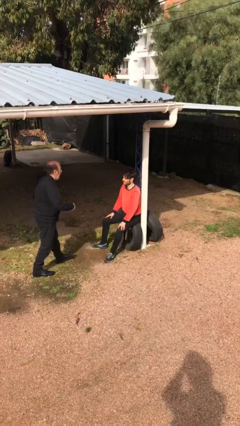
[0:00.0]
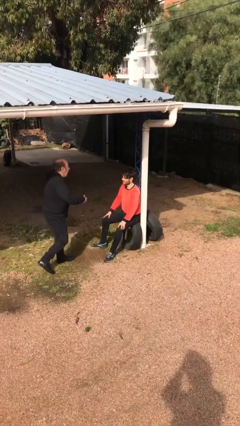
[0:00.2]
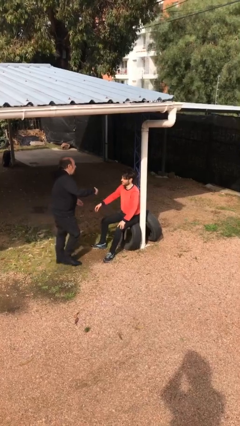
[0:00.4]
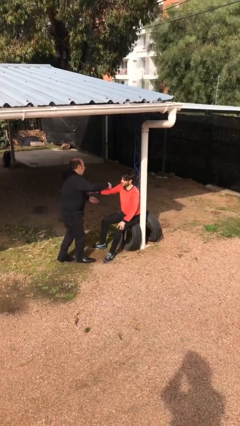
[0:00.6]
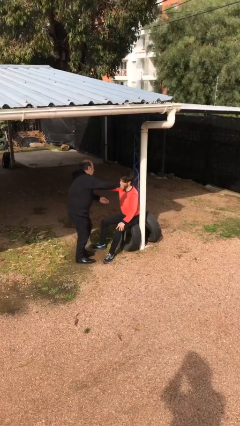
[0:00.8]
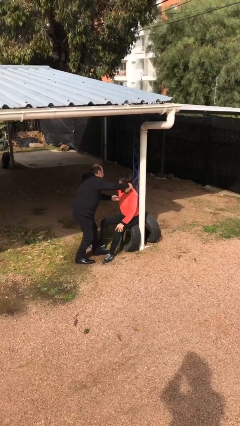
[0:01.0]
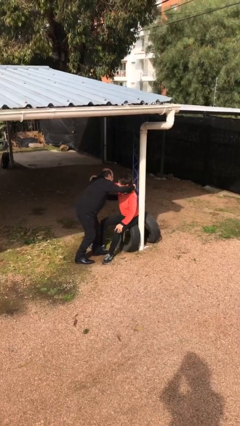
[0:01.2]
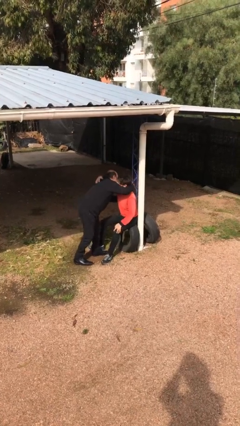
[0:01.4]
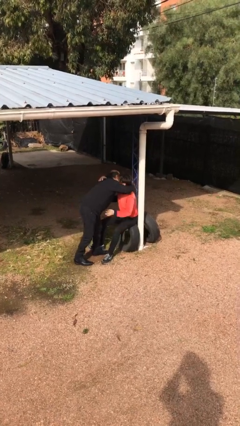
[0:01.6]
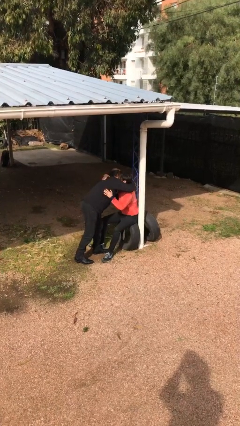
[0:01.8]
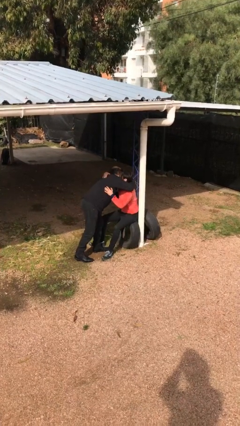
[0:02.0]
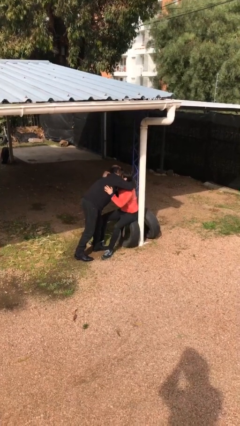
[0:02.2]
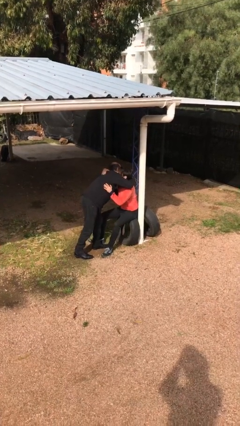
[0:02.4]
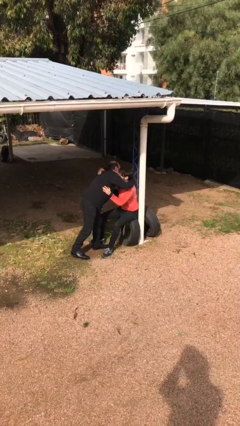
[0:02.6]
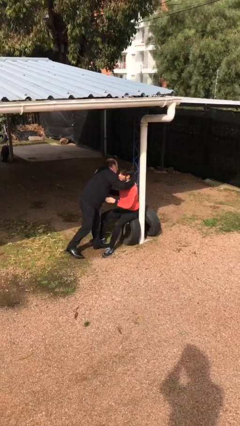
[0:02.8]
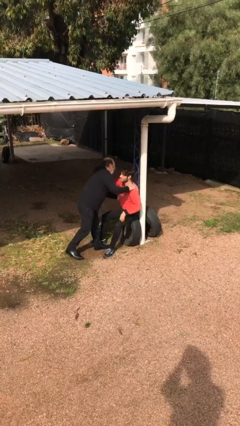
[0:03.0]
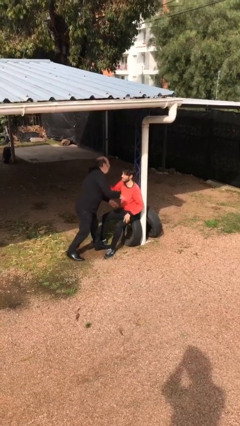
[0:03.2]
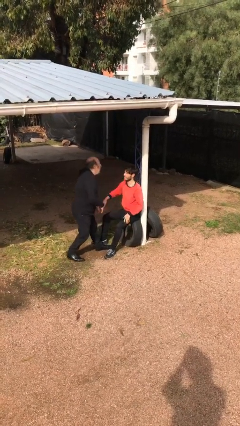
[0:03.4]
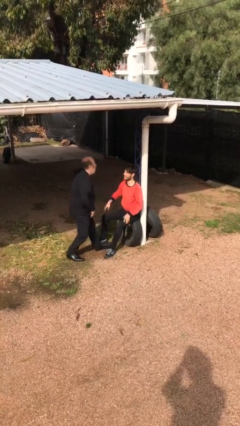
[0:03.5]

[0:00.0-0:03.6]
person embraces person

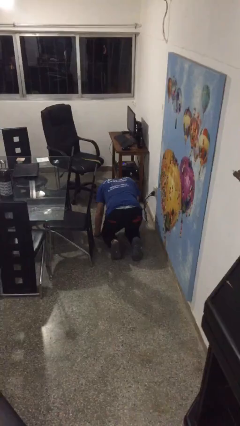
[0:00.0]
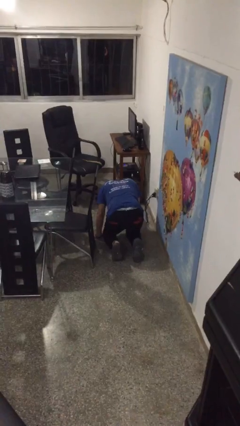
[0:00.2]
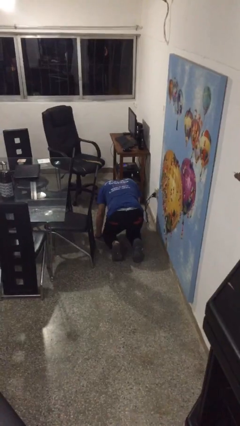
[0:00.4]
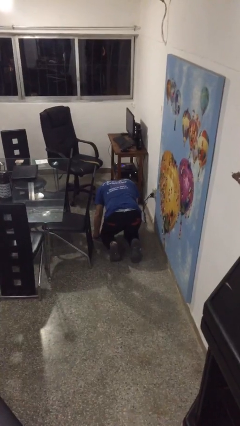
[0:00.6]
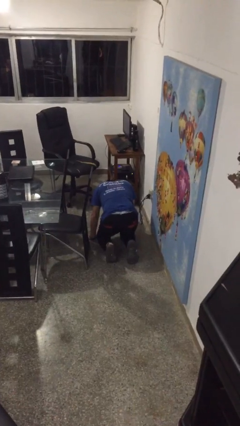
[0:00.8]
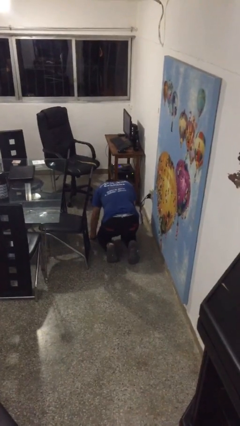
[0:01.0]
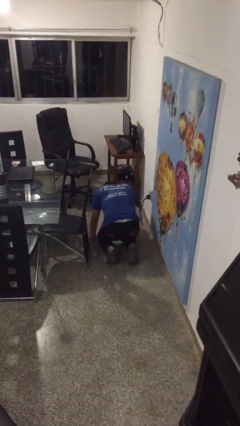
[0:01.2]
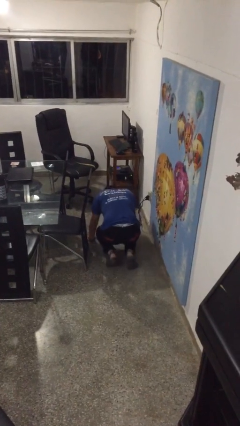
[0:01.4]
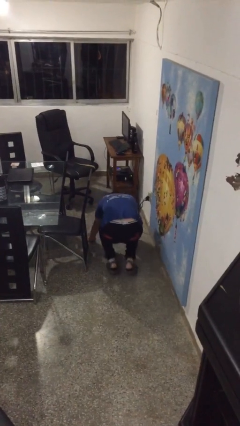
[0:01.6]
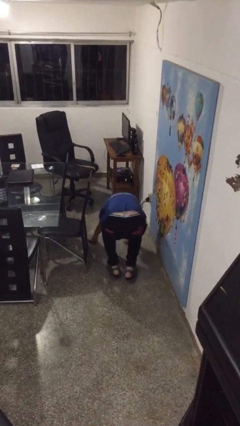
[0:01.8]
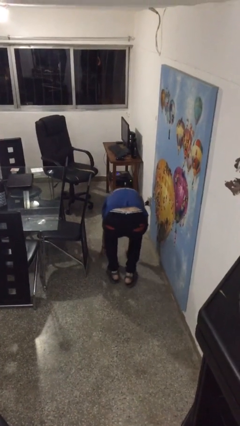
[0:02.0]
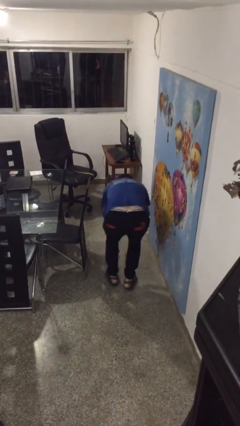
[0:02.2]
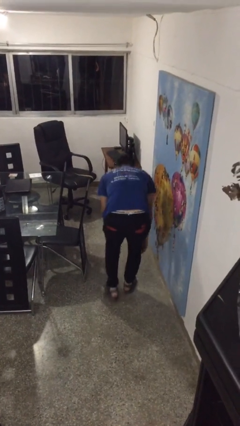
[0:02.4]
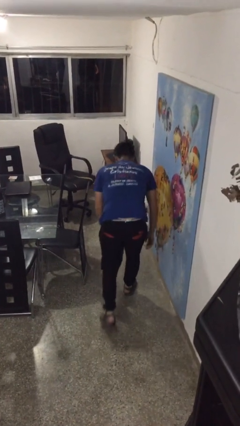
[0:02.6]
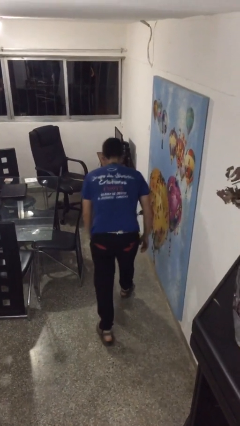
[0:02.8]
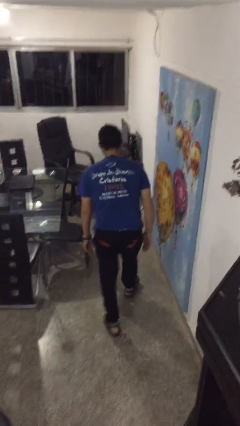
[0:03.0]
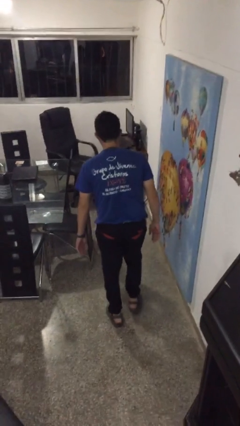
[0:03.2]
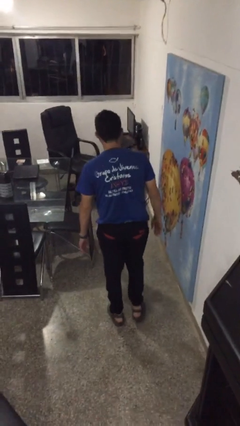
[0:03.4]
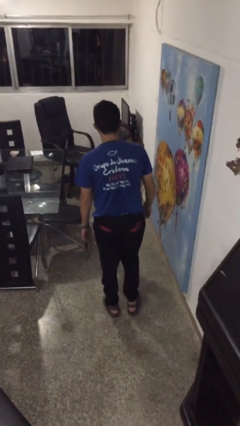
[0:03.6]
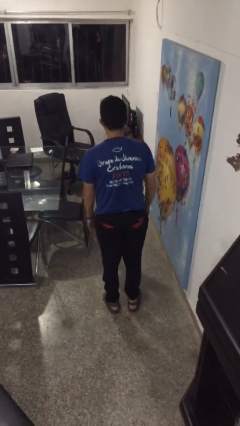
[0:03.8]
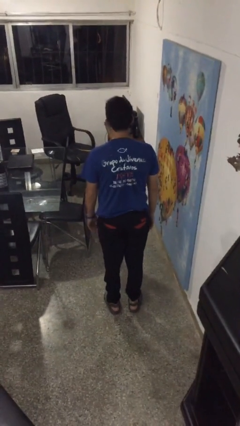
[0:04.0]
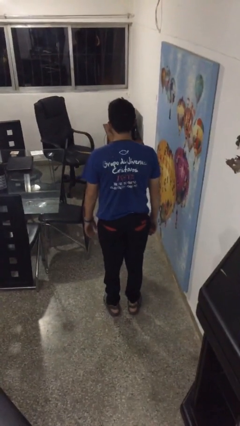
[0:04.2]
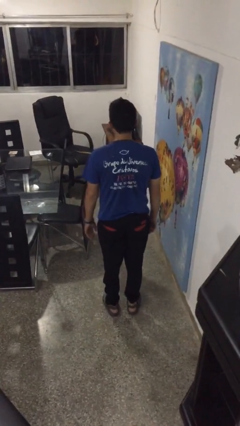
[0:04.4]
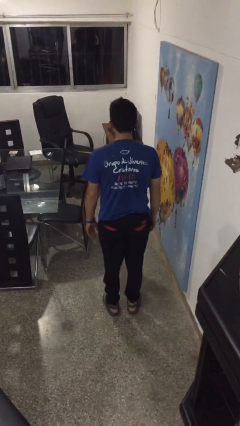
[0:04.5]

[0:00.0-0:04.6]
person stands up from floor

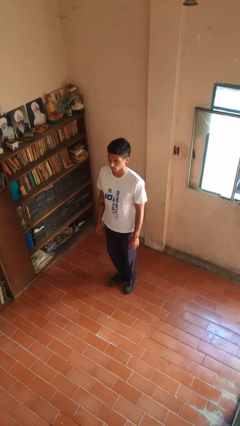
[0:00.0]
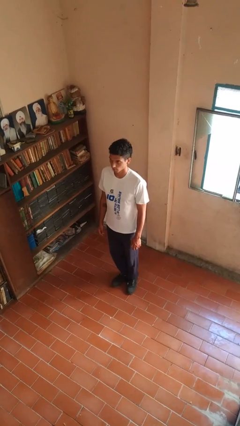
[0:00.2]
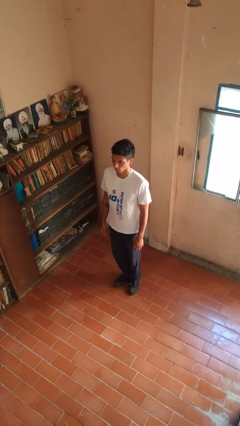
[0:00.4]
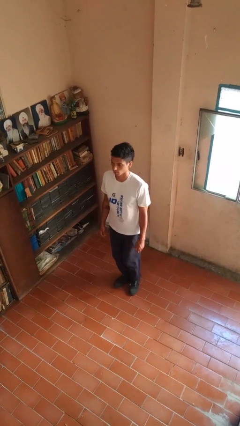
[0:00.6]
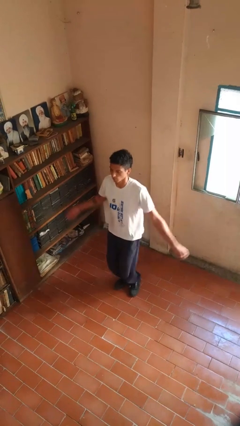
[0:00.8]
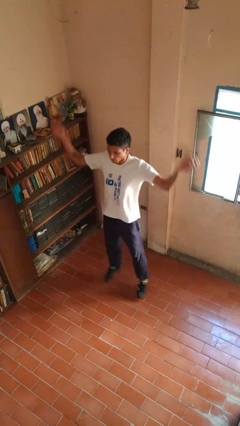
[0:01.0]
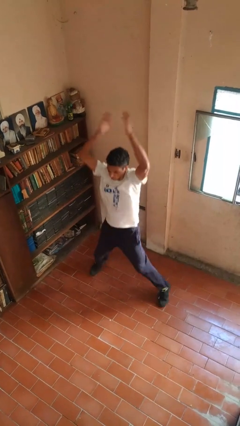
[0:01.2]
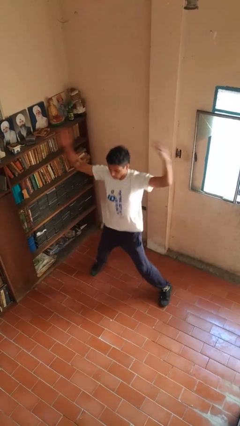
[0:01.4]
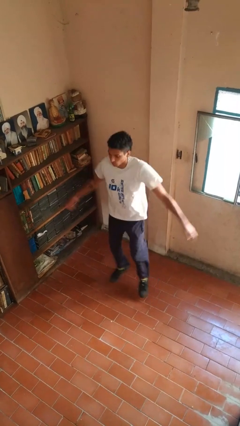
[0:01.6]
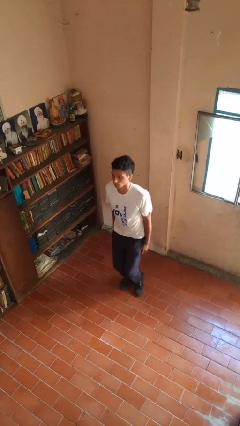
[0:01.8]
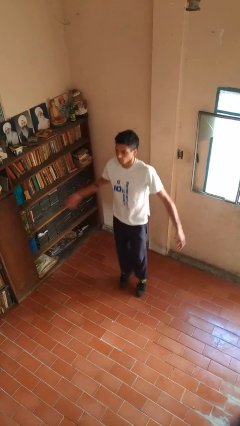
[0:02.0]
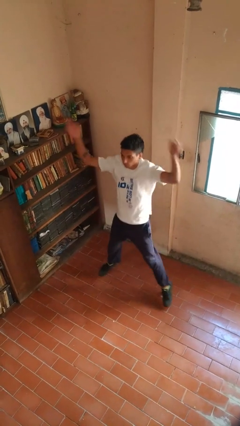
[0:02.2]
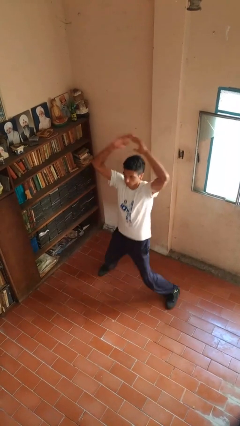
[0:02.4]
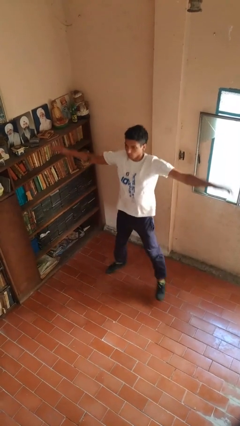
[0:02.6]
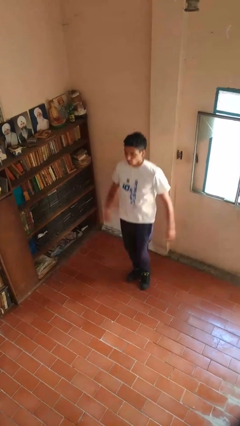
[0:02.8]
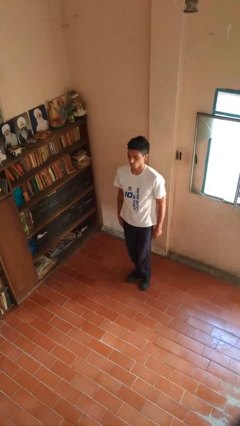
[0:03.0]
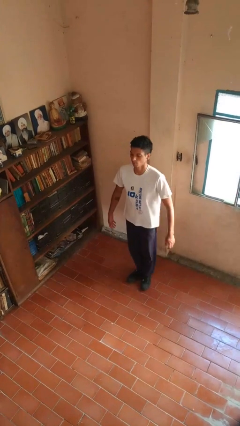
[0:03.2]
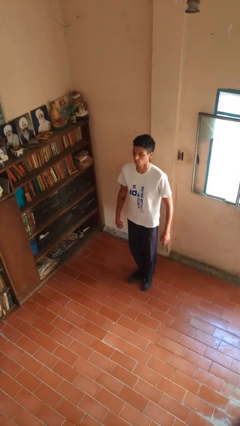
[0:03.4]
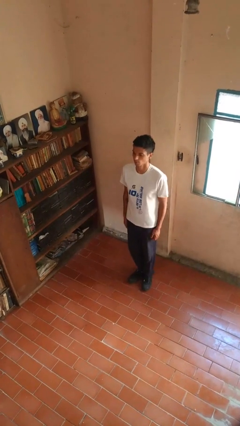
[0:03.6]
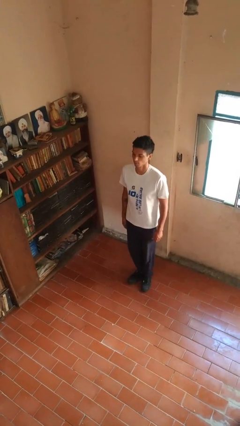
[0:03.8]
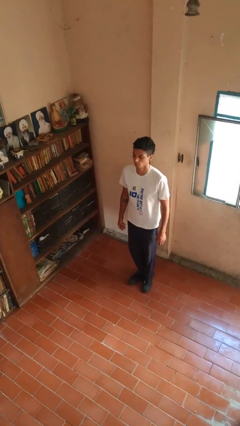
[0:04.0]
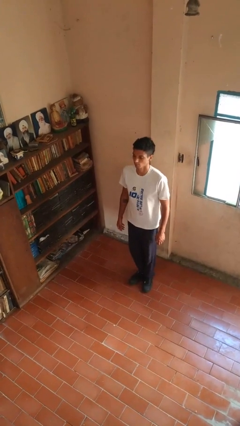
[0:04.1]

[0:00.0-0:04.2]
person exercises with jumping jacks

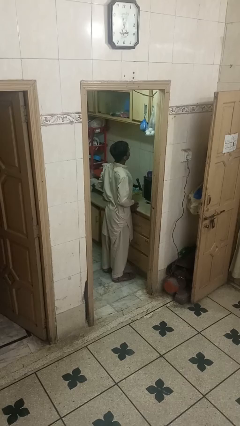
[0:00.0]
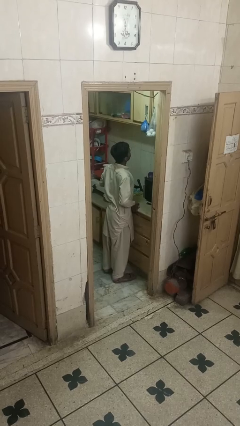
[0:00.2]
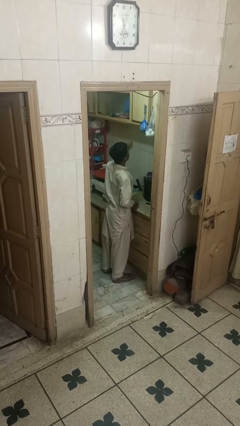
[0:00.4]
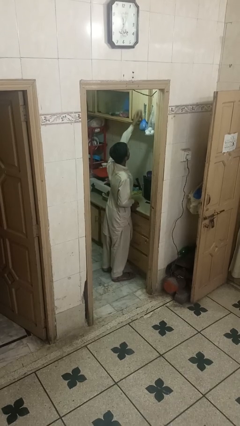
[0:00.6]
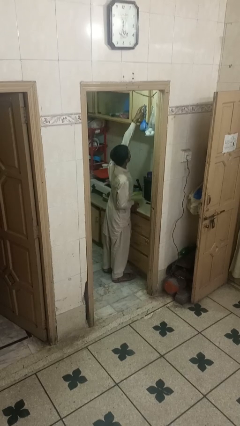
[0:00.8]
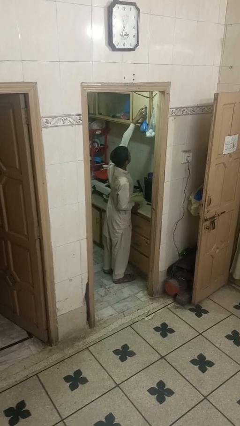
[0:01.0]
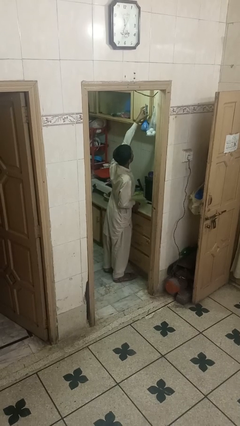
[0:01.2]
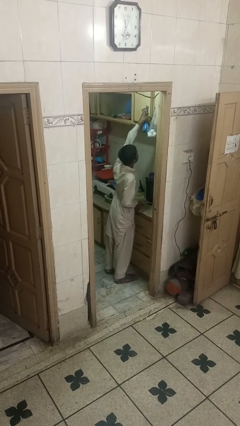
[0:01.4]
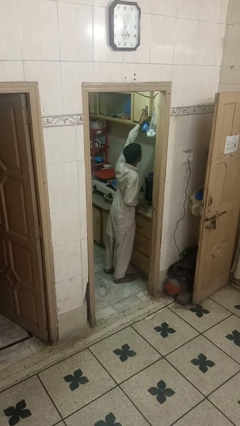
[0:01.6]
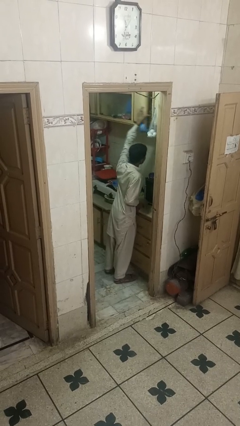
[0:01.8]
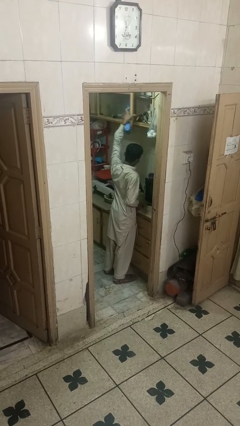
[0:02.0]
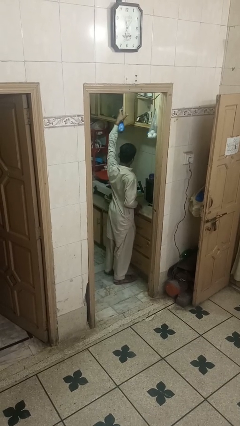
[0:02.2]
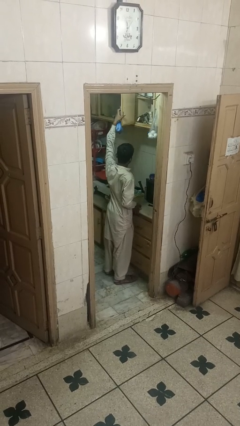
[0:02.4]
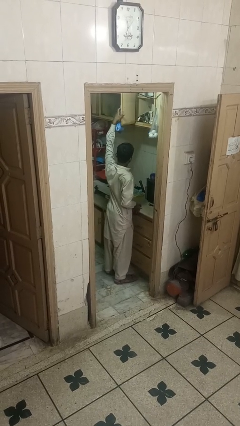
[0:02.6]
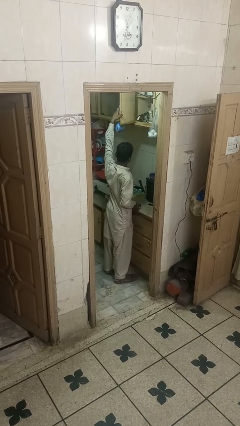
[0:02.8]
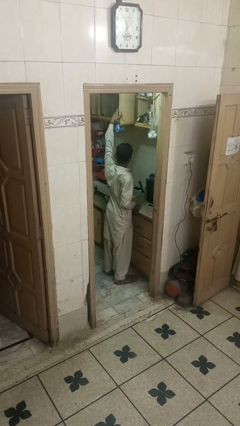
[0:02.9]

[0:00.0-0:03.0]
person opens cabinet

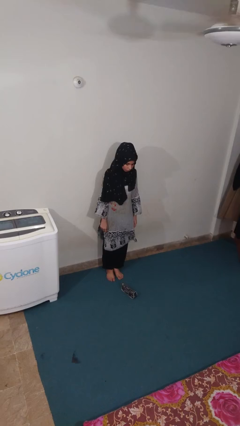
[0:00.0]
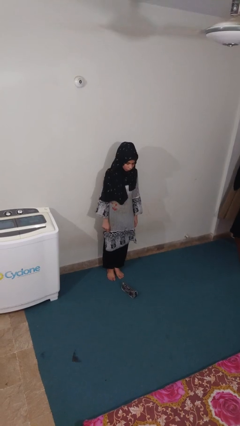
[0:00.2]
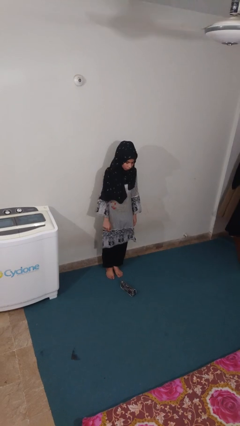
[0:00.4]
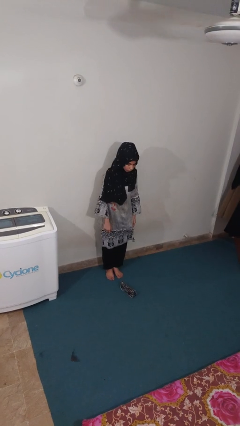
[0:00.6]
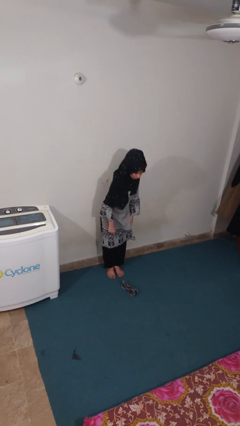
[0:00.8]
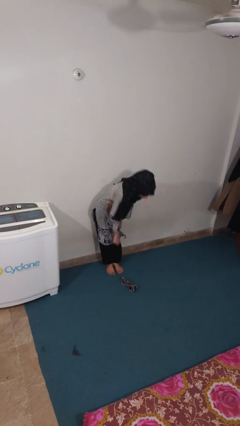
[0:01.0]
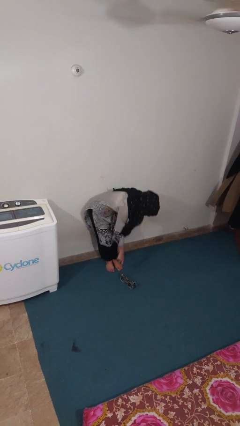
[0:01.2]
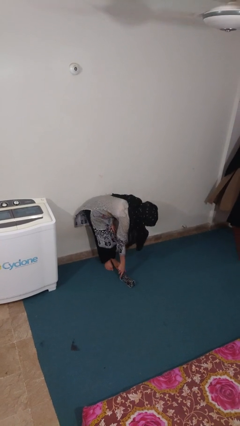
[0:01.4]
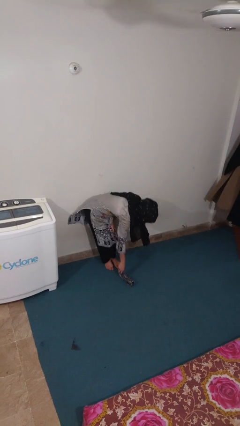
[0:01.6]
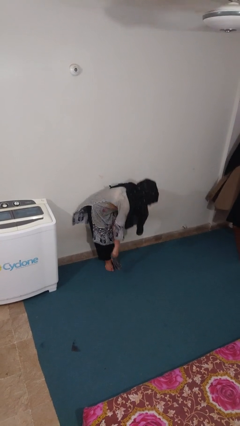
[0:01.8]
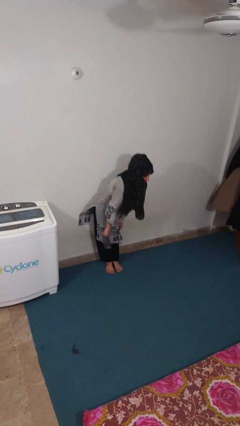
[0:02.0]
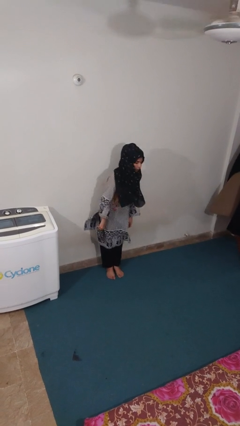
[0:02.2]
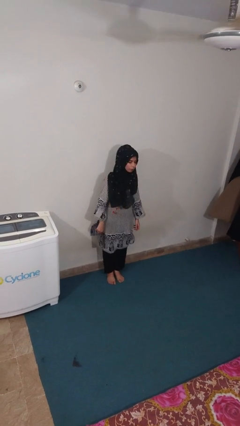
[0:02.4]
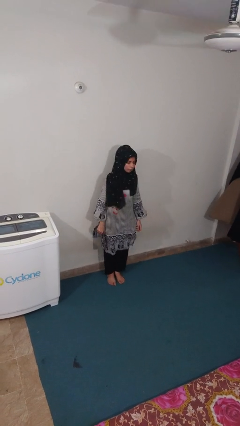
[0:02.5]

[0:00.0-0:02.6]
person picks up object from floor

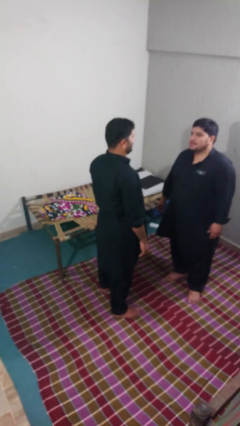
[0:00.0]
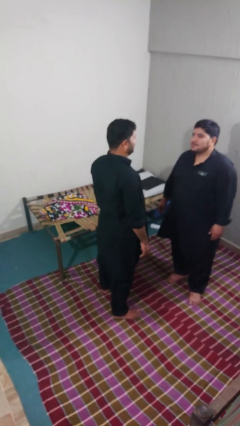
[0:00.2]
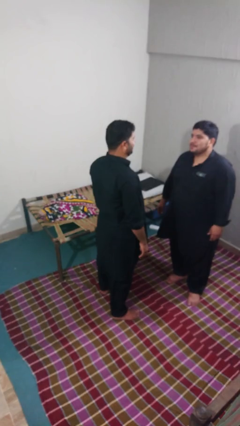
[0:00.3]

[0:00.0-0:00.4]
person touches face of person
